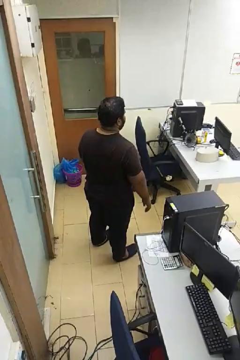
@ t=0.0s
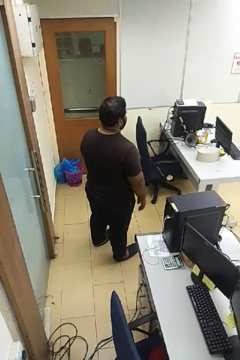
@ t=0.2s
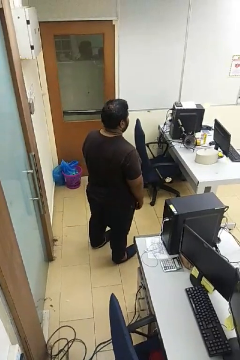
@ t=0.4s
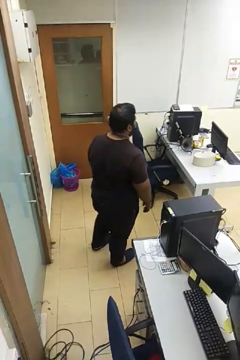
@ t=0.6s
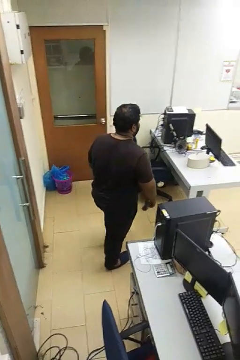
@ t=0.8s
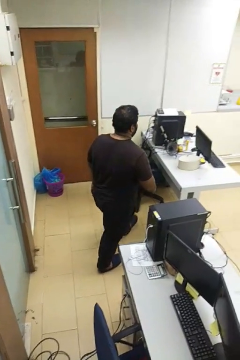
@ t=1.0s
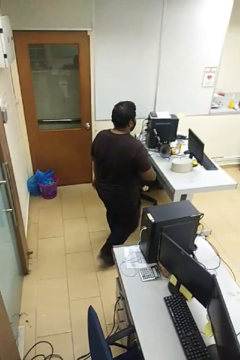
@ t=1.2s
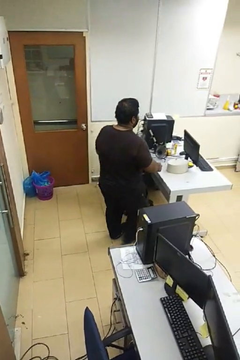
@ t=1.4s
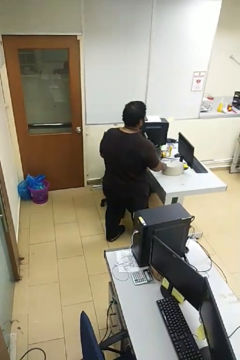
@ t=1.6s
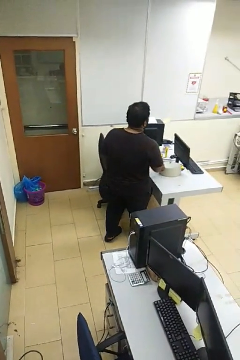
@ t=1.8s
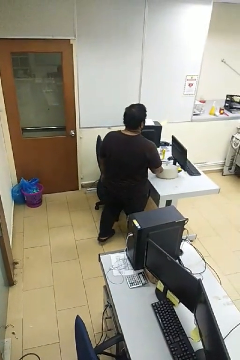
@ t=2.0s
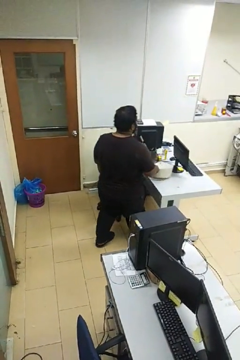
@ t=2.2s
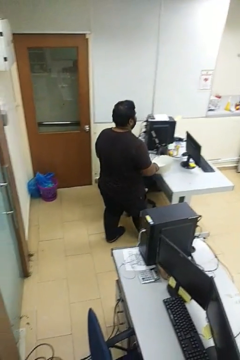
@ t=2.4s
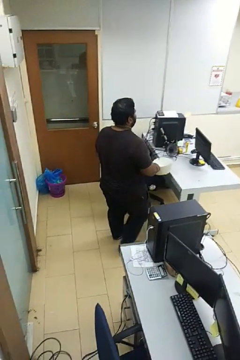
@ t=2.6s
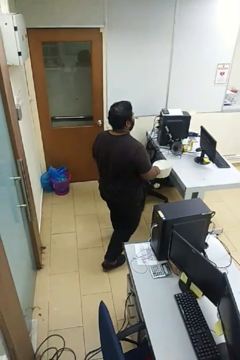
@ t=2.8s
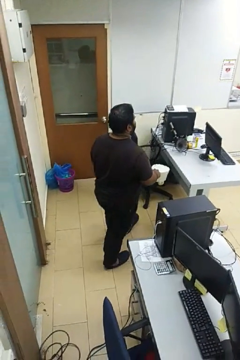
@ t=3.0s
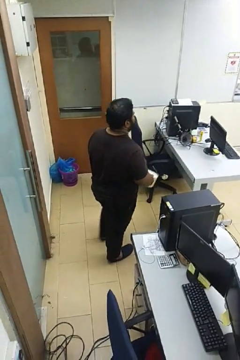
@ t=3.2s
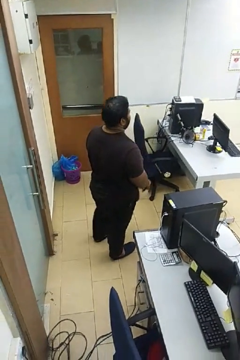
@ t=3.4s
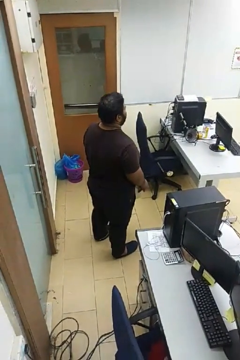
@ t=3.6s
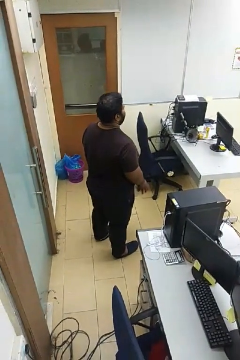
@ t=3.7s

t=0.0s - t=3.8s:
person picks up object from table

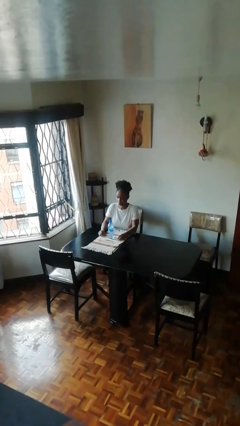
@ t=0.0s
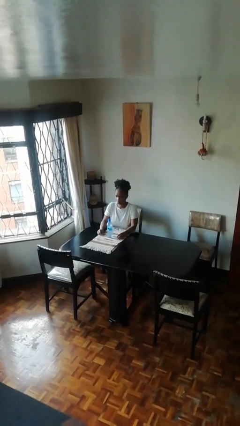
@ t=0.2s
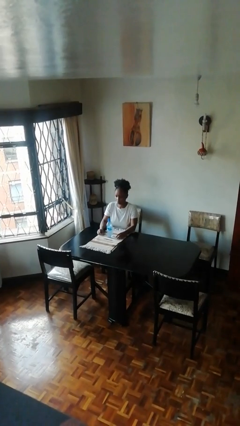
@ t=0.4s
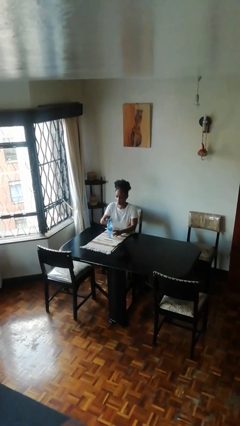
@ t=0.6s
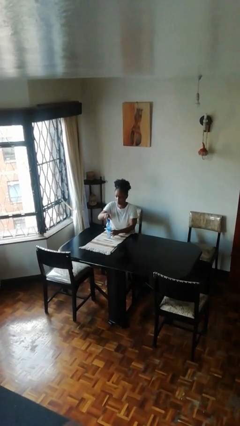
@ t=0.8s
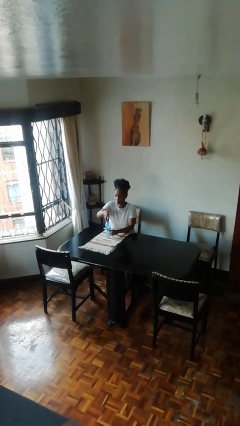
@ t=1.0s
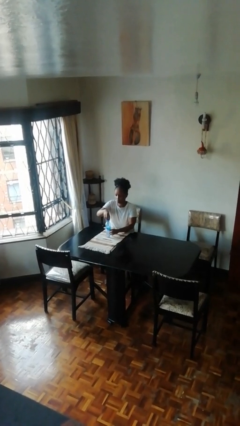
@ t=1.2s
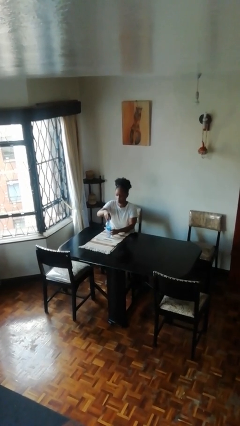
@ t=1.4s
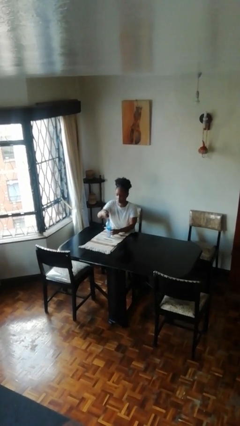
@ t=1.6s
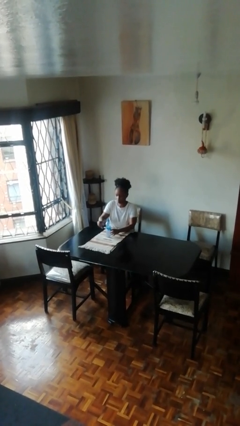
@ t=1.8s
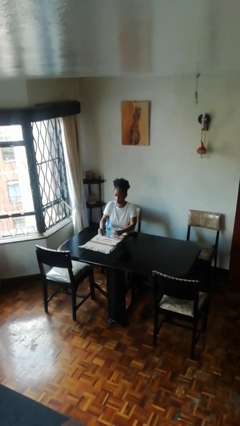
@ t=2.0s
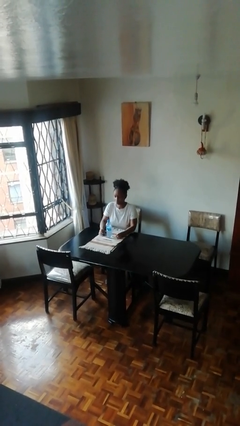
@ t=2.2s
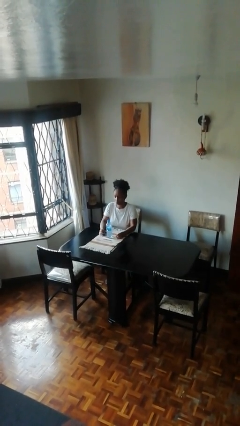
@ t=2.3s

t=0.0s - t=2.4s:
person unscrews lid from bottle

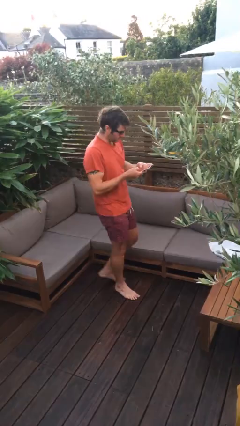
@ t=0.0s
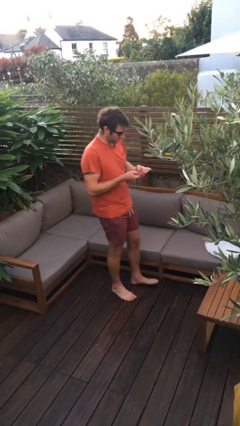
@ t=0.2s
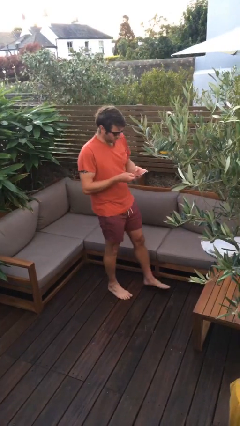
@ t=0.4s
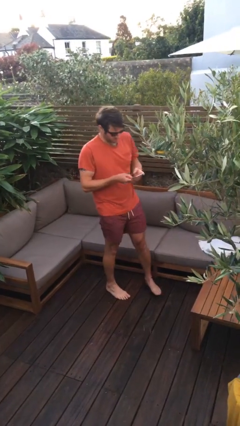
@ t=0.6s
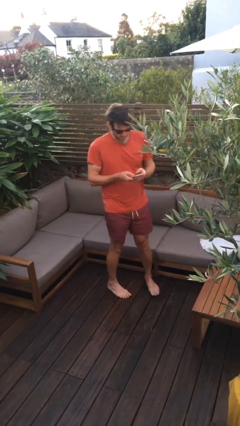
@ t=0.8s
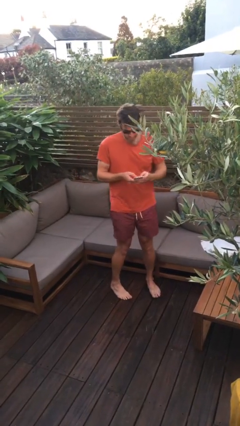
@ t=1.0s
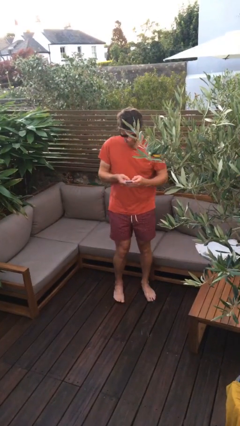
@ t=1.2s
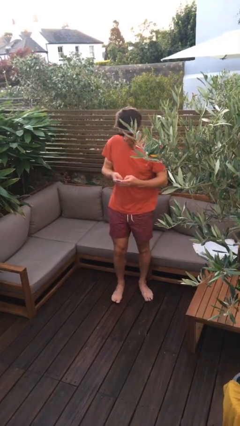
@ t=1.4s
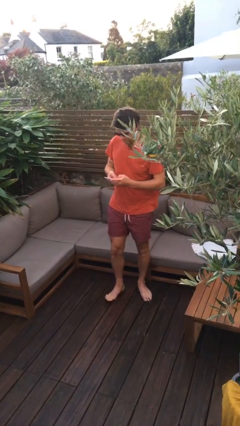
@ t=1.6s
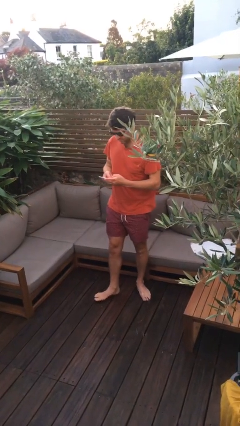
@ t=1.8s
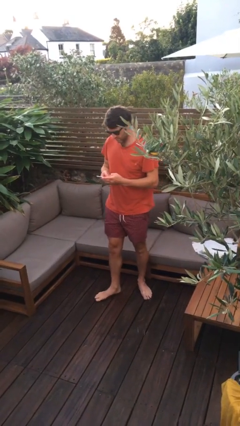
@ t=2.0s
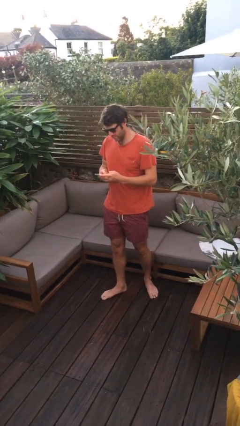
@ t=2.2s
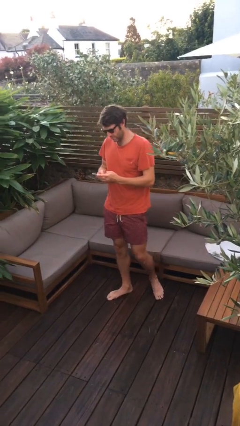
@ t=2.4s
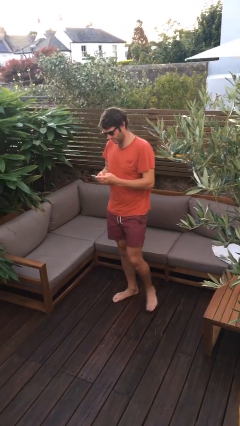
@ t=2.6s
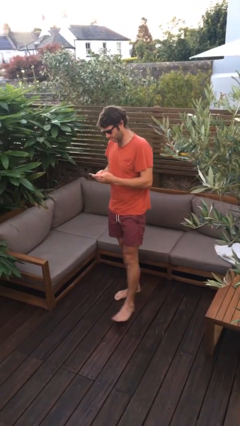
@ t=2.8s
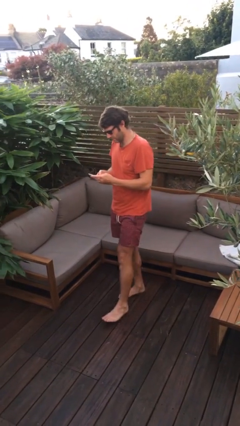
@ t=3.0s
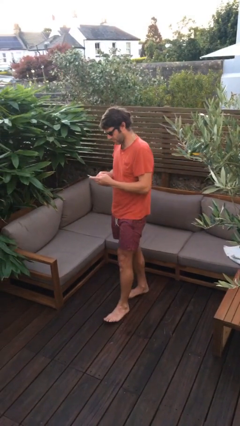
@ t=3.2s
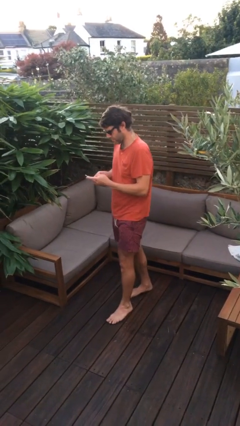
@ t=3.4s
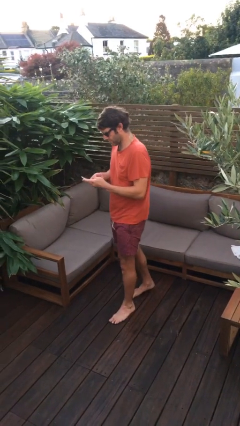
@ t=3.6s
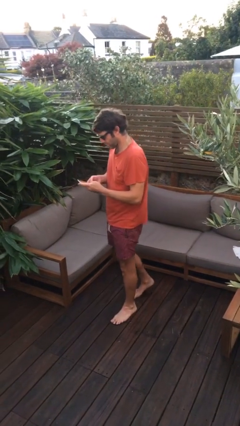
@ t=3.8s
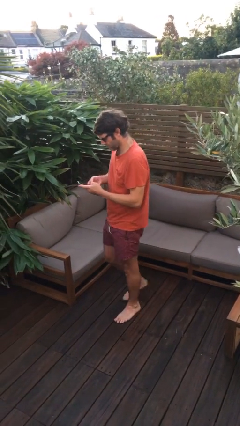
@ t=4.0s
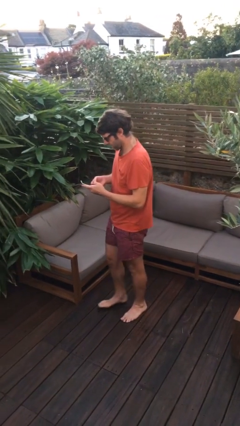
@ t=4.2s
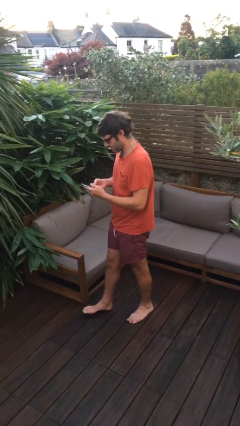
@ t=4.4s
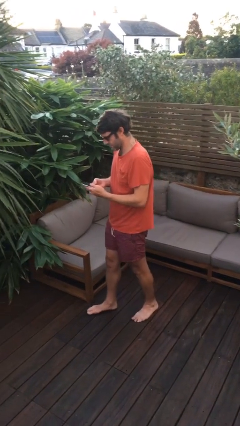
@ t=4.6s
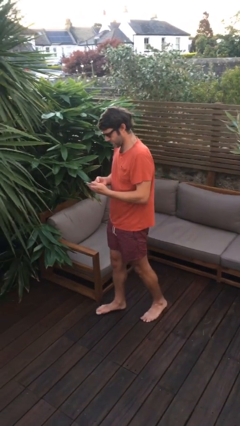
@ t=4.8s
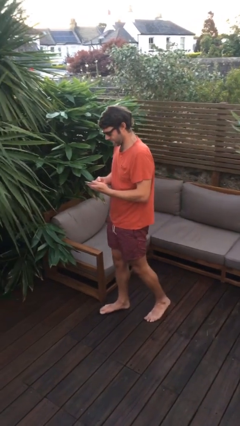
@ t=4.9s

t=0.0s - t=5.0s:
person texts on phone

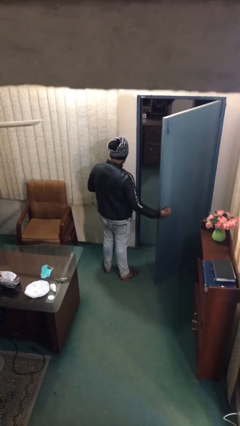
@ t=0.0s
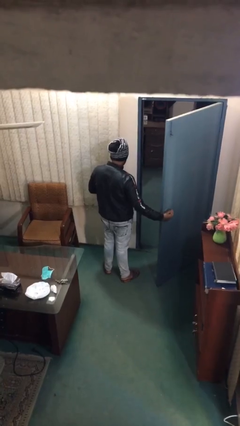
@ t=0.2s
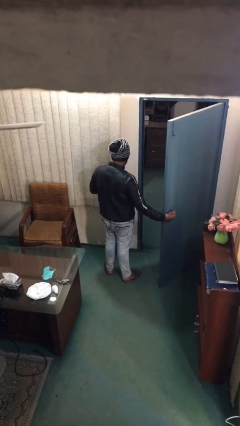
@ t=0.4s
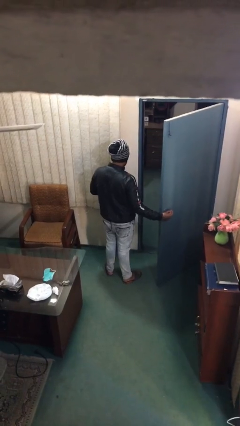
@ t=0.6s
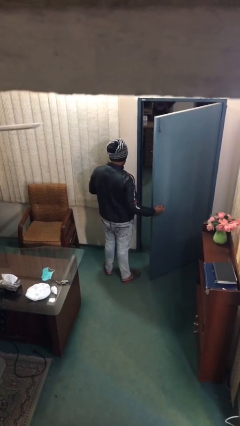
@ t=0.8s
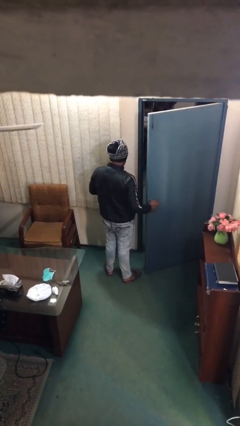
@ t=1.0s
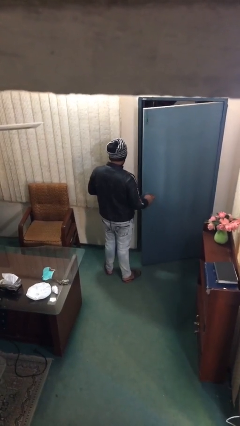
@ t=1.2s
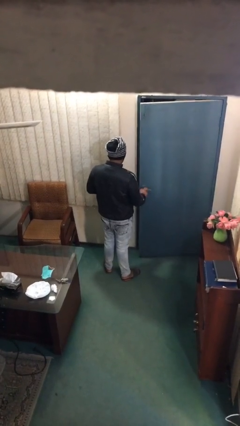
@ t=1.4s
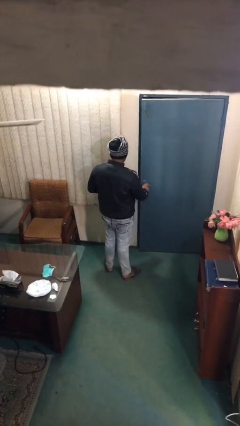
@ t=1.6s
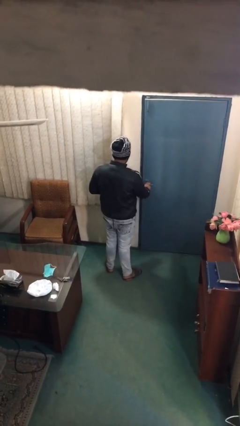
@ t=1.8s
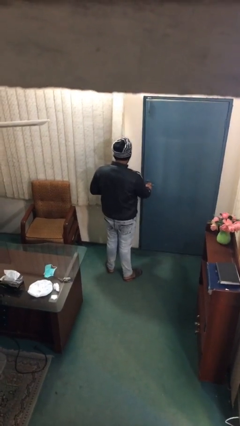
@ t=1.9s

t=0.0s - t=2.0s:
person closes facility door

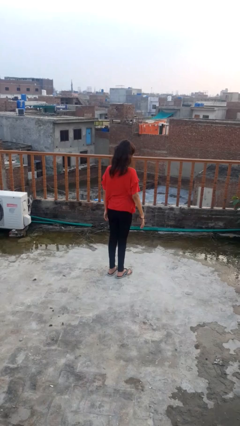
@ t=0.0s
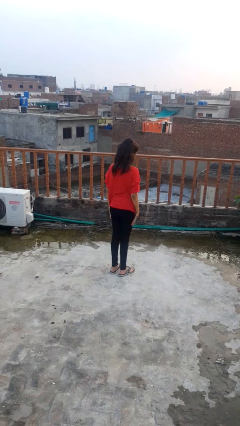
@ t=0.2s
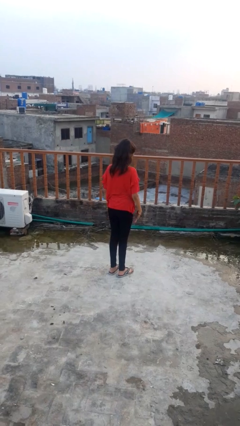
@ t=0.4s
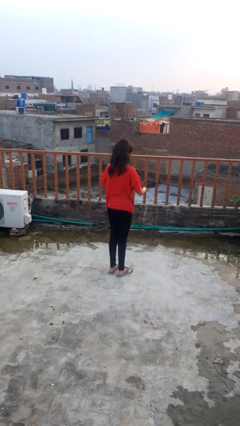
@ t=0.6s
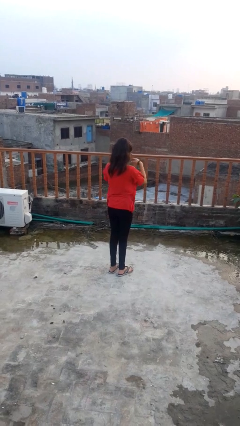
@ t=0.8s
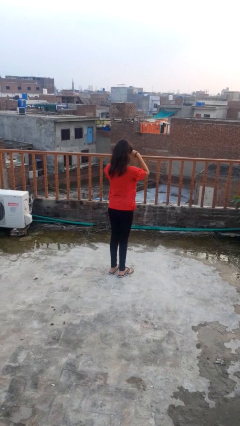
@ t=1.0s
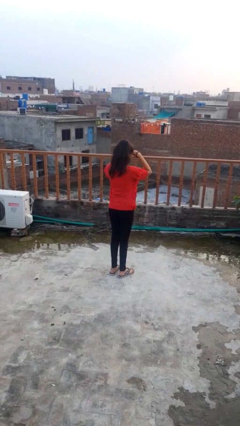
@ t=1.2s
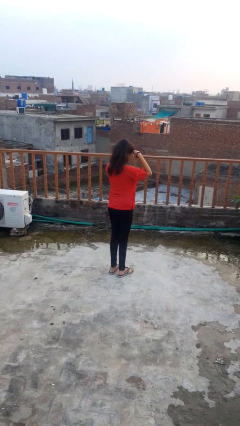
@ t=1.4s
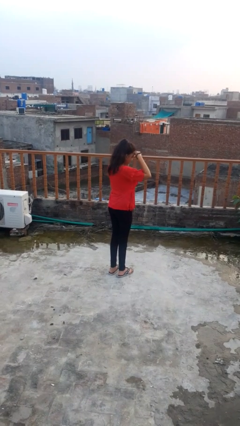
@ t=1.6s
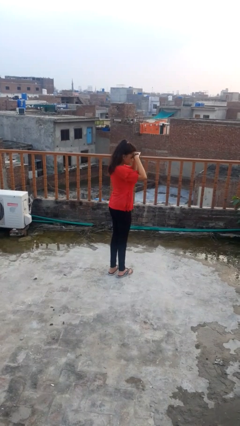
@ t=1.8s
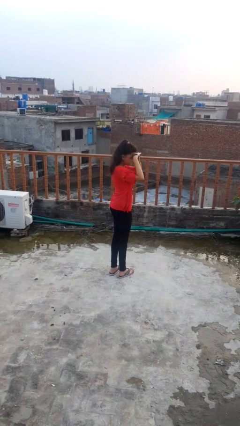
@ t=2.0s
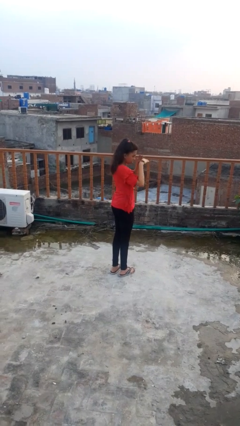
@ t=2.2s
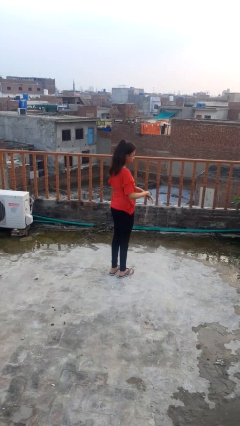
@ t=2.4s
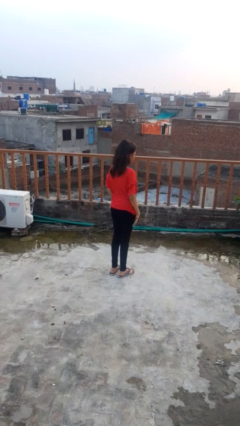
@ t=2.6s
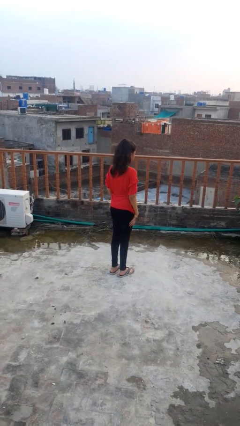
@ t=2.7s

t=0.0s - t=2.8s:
person shades eyes

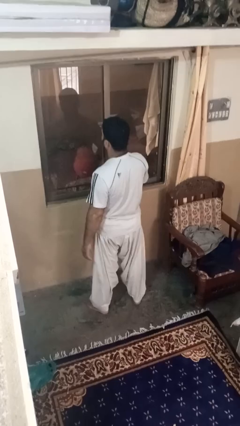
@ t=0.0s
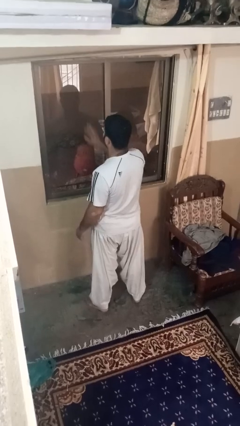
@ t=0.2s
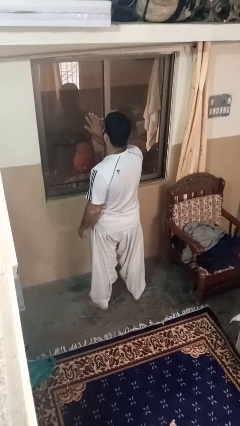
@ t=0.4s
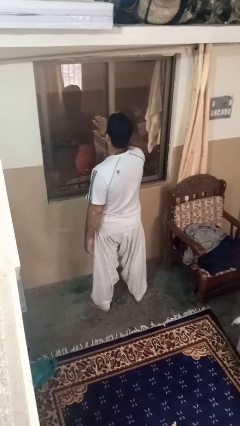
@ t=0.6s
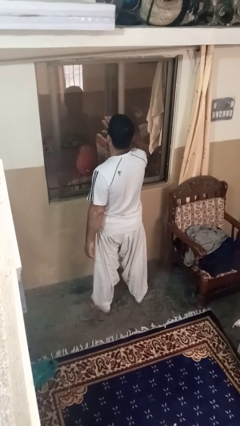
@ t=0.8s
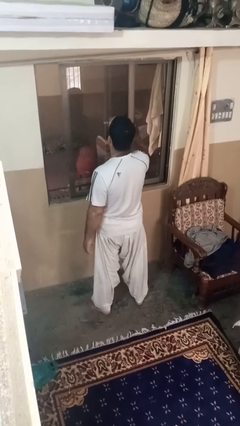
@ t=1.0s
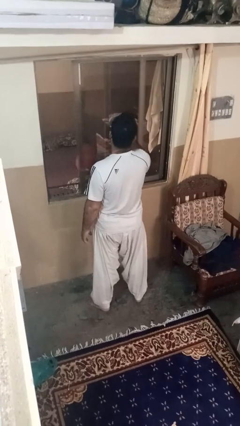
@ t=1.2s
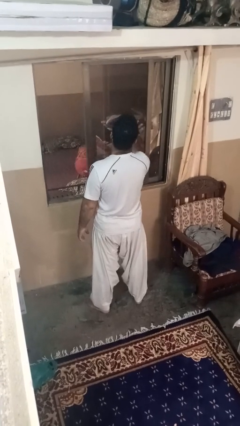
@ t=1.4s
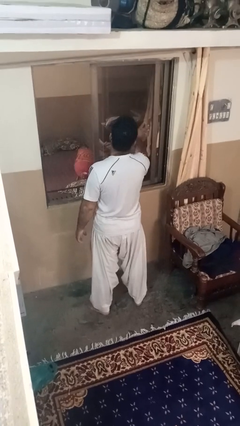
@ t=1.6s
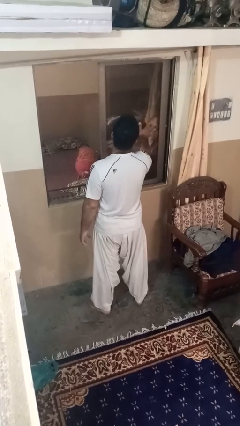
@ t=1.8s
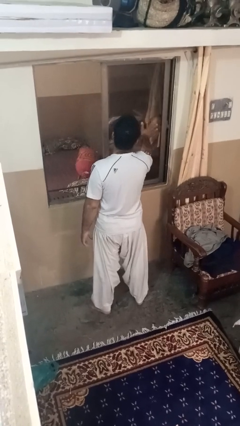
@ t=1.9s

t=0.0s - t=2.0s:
person opens home window
